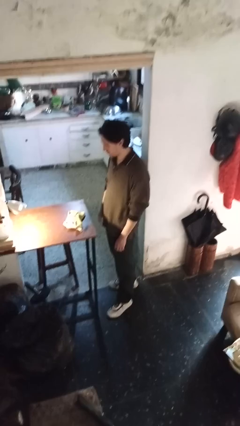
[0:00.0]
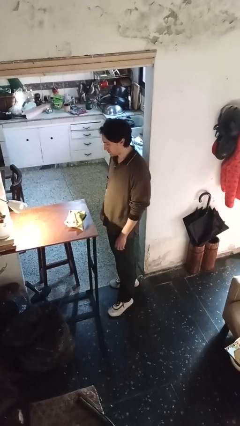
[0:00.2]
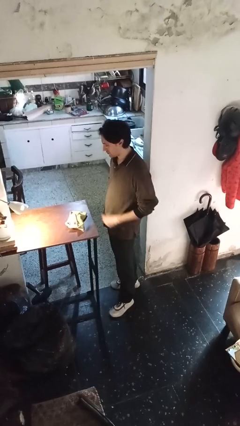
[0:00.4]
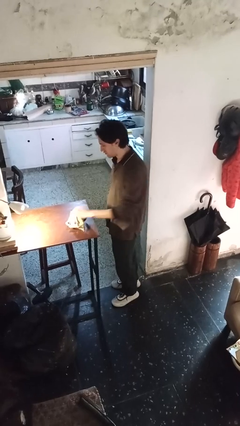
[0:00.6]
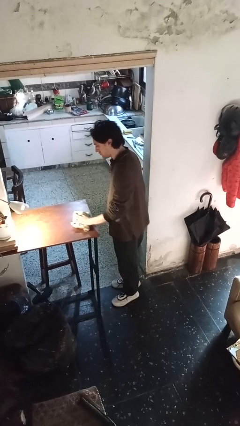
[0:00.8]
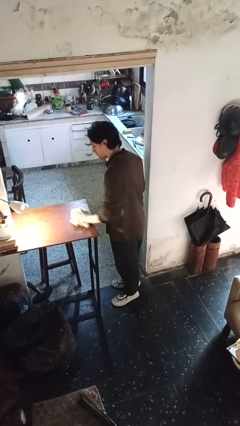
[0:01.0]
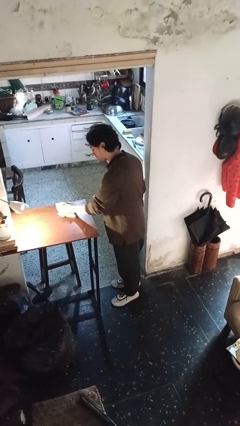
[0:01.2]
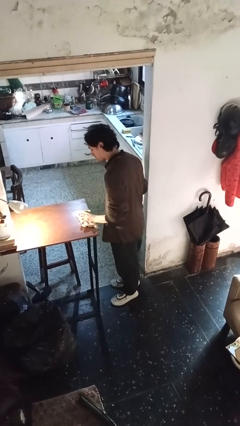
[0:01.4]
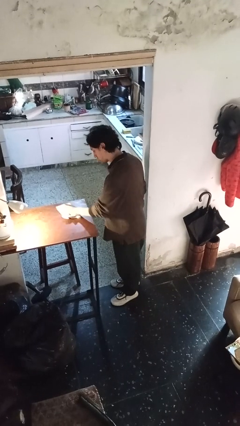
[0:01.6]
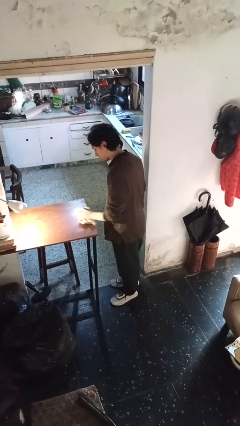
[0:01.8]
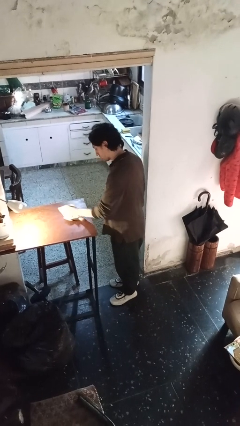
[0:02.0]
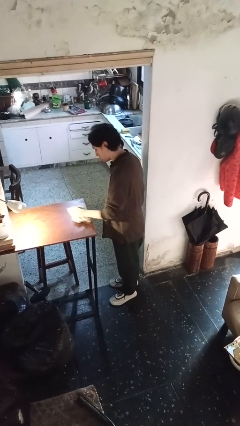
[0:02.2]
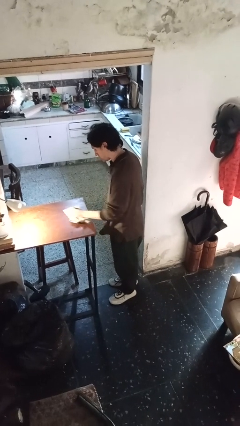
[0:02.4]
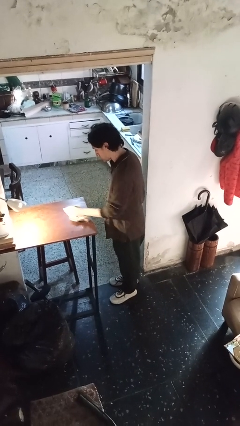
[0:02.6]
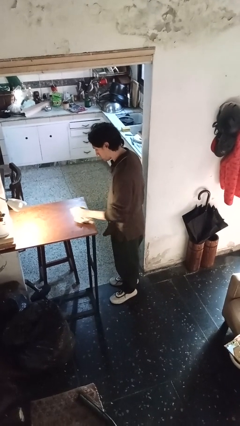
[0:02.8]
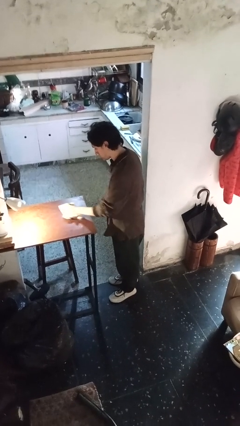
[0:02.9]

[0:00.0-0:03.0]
person cleans table with rag

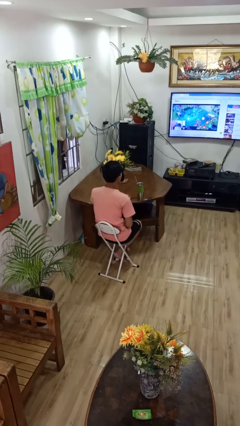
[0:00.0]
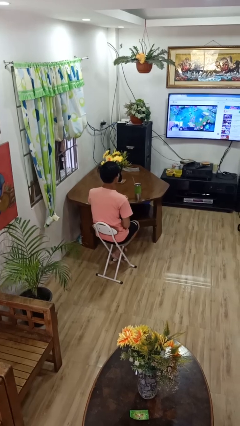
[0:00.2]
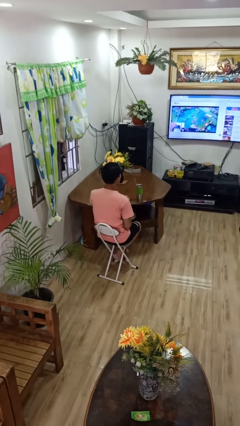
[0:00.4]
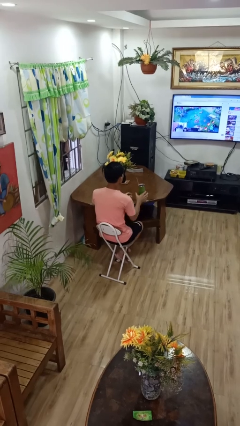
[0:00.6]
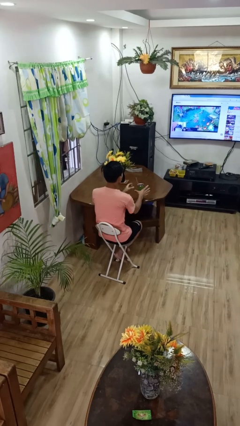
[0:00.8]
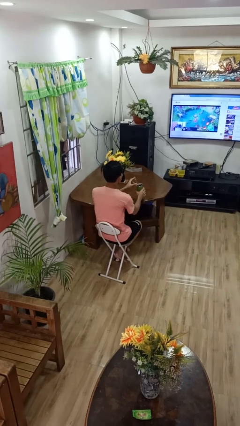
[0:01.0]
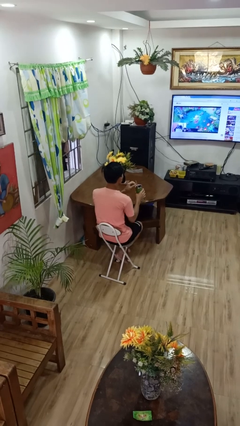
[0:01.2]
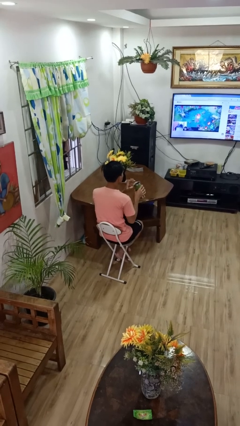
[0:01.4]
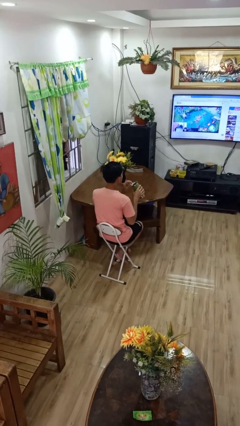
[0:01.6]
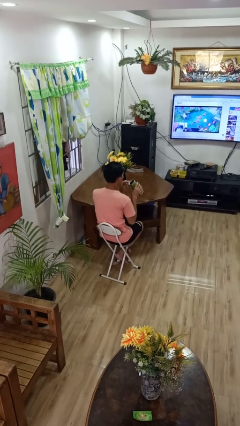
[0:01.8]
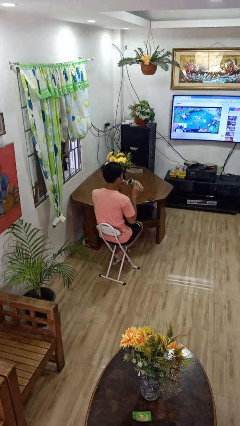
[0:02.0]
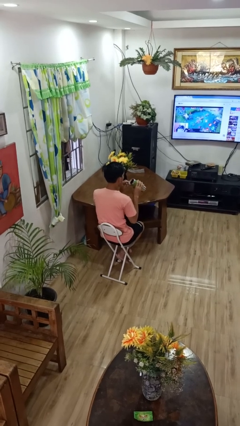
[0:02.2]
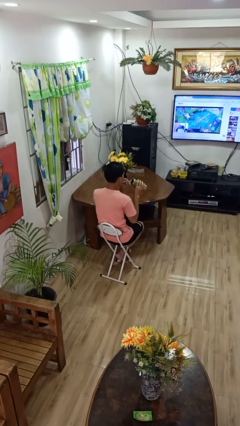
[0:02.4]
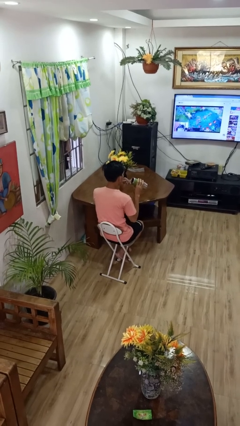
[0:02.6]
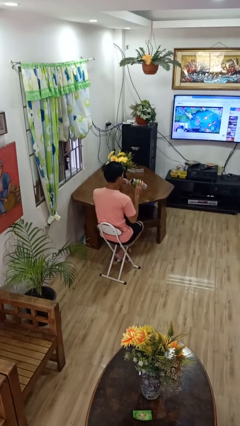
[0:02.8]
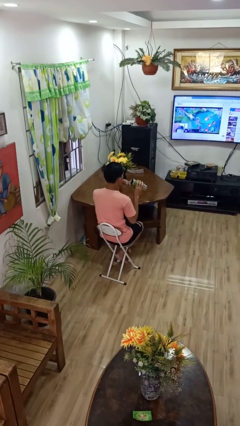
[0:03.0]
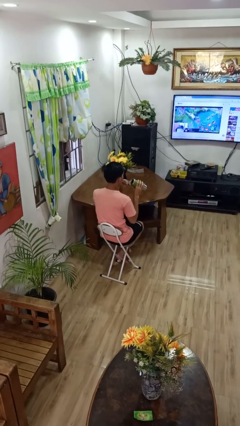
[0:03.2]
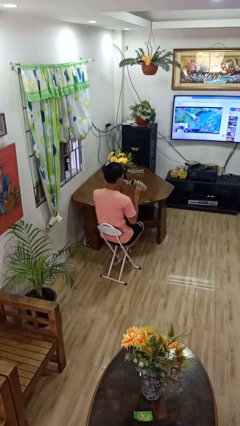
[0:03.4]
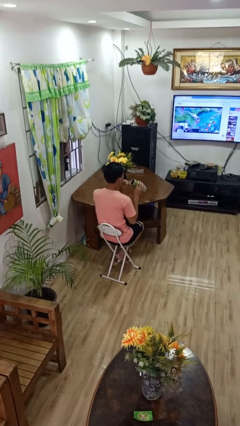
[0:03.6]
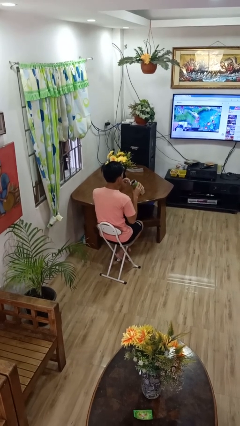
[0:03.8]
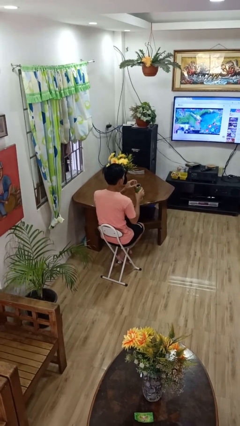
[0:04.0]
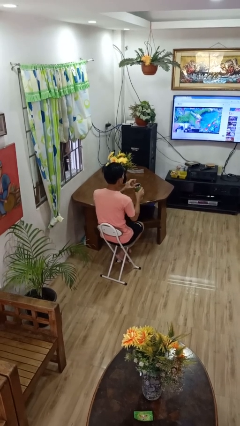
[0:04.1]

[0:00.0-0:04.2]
person drinks from straw

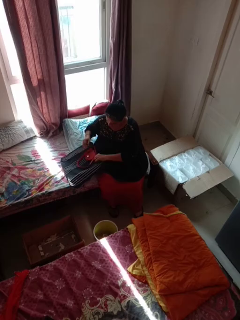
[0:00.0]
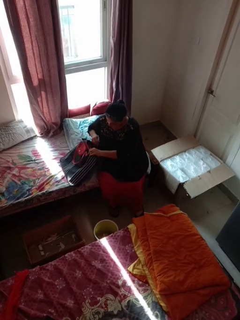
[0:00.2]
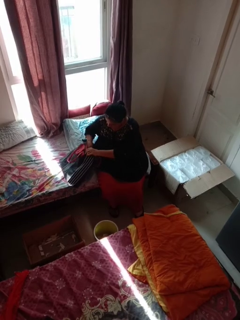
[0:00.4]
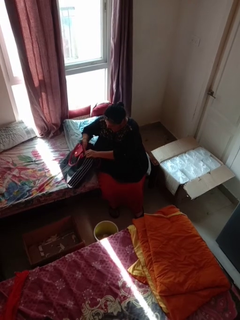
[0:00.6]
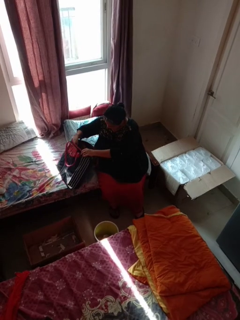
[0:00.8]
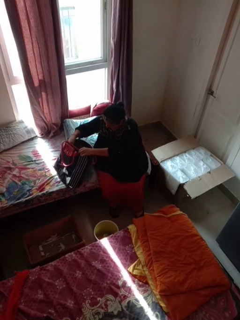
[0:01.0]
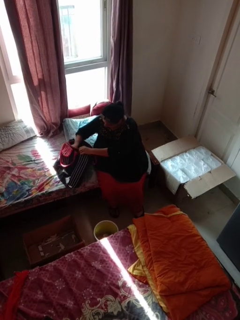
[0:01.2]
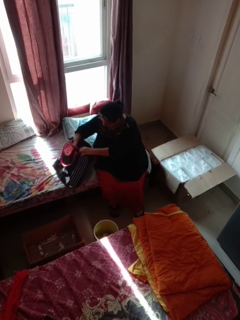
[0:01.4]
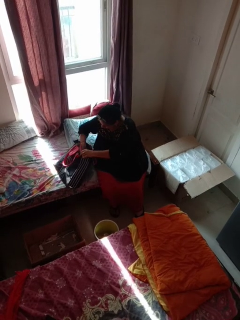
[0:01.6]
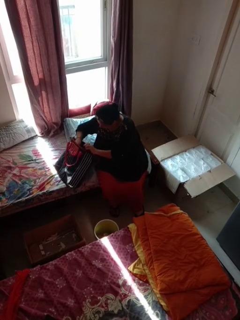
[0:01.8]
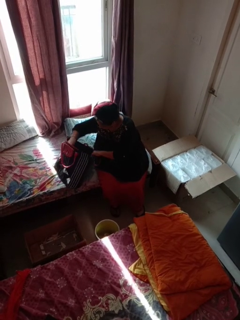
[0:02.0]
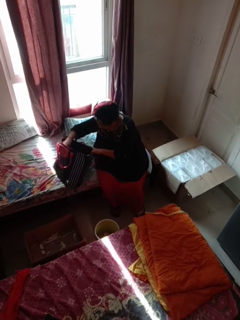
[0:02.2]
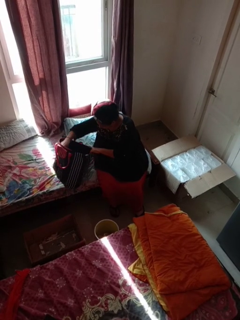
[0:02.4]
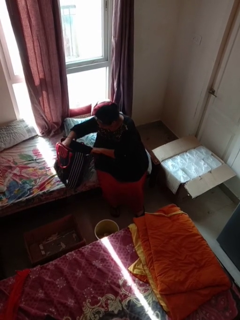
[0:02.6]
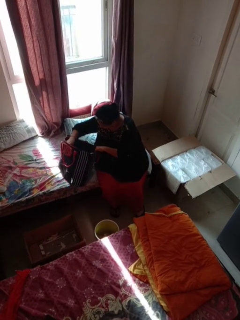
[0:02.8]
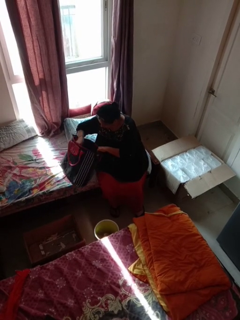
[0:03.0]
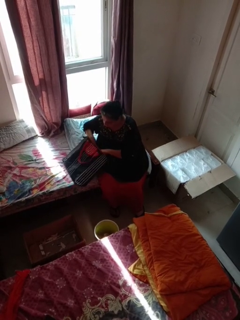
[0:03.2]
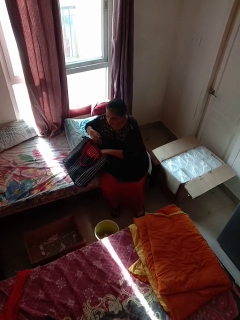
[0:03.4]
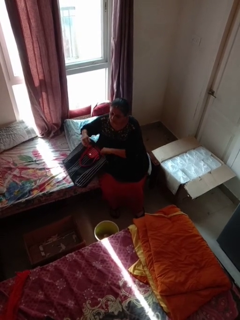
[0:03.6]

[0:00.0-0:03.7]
person searches in bag

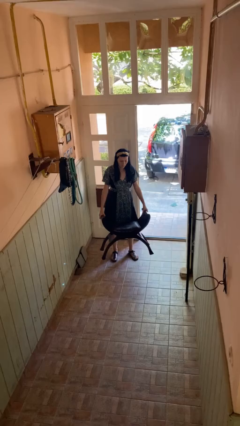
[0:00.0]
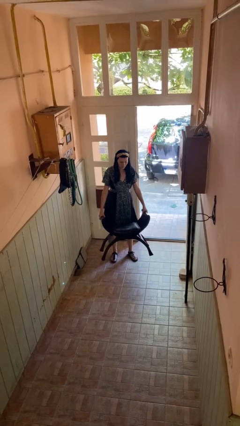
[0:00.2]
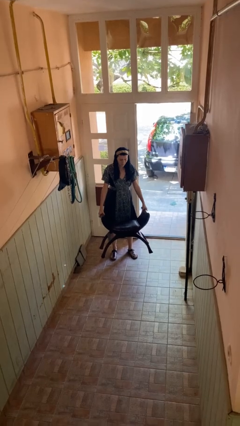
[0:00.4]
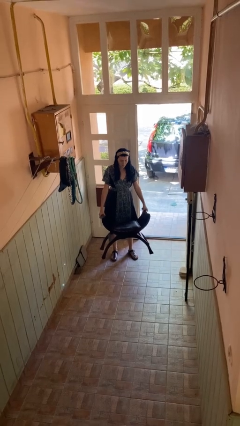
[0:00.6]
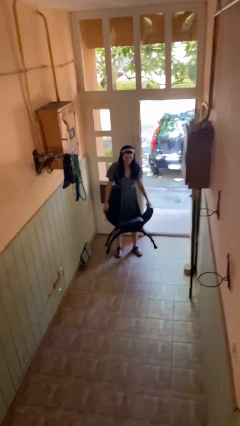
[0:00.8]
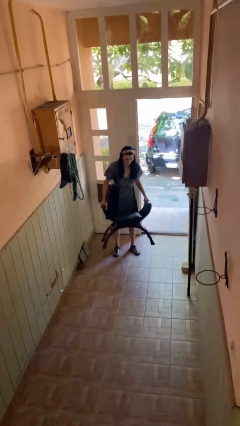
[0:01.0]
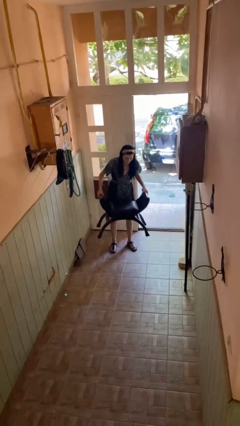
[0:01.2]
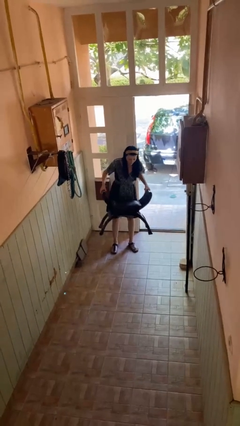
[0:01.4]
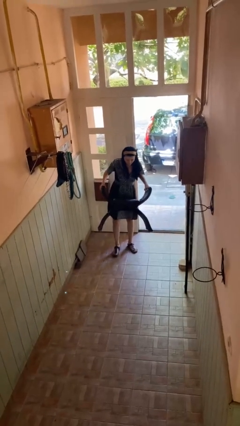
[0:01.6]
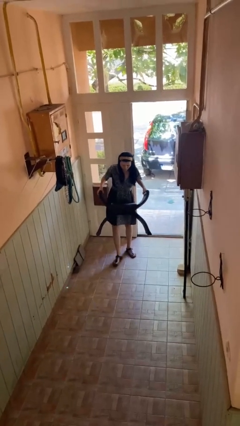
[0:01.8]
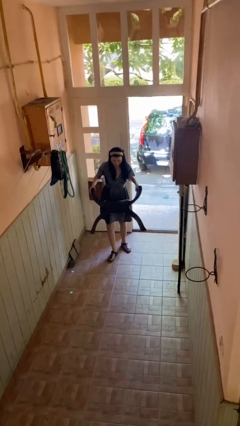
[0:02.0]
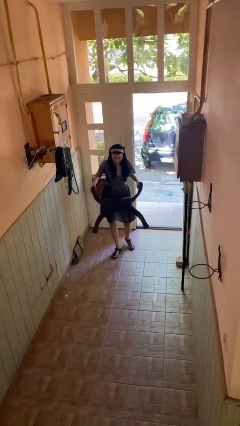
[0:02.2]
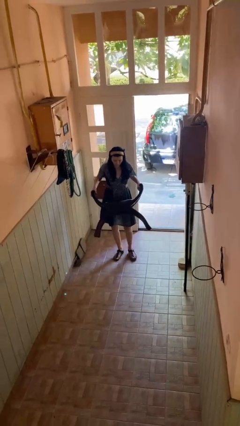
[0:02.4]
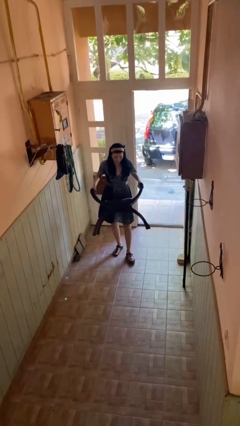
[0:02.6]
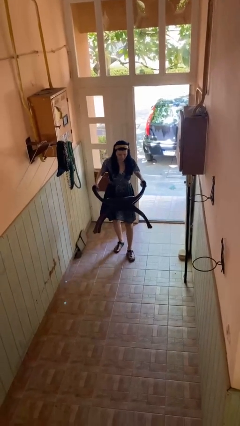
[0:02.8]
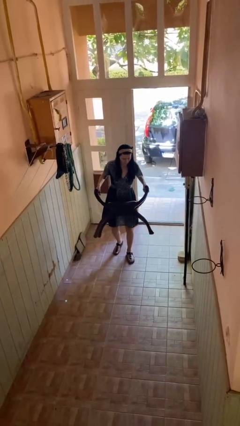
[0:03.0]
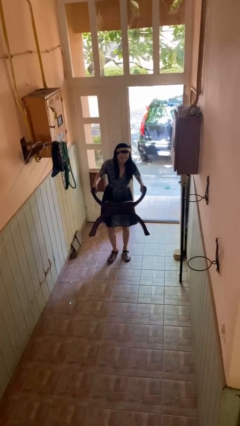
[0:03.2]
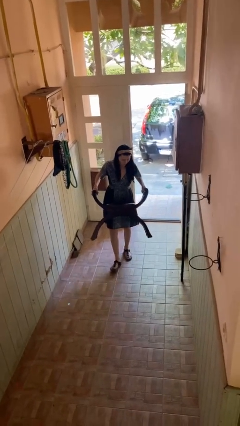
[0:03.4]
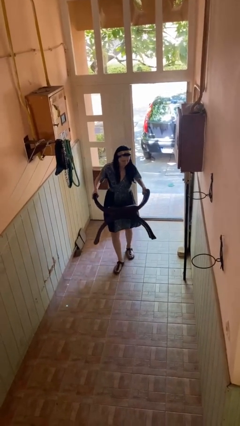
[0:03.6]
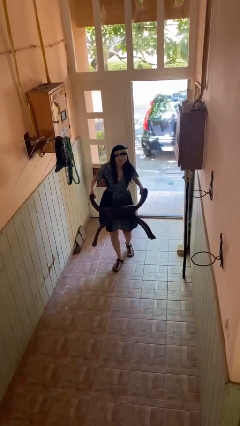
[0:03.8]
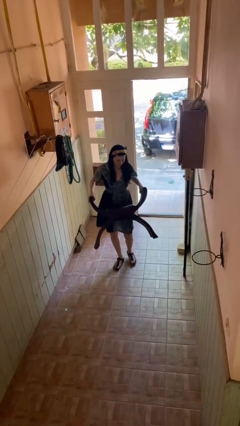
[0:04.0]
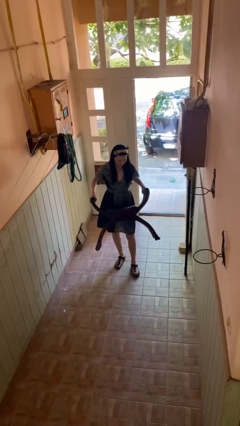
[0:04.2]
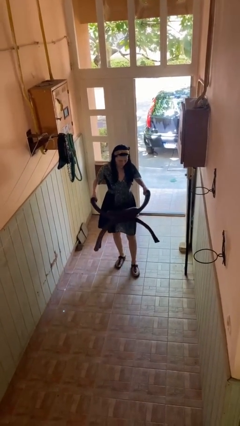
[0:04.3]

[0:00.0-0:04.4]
person carries furniture

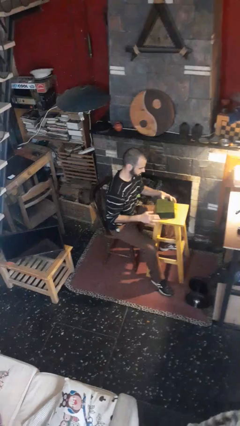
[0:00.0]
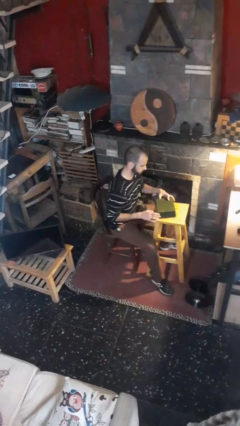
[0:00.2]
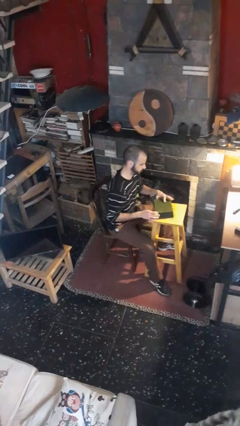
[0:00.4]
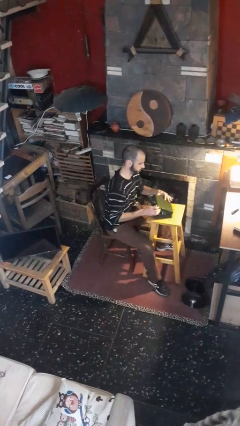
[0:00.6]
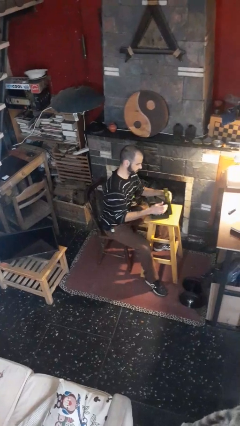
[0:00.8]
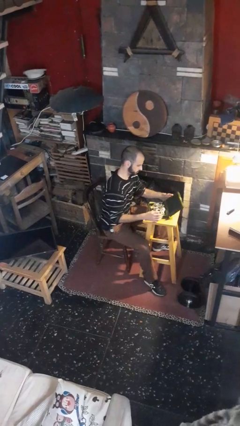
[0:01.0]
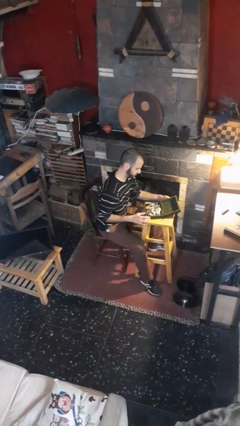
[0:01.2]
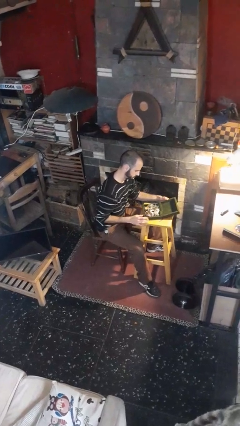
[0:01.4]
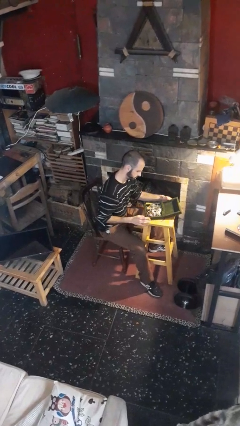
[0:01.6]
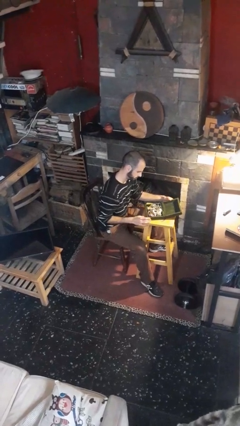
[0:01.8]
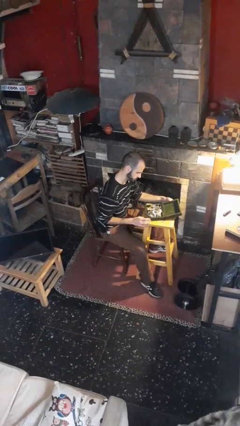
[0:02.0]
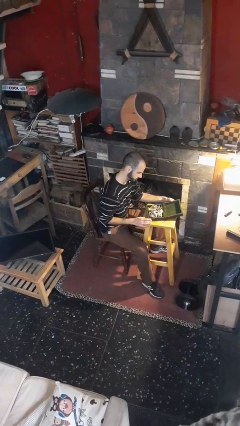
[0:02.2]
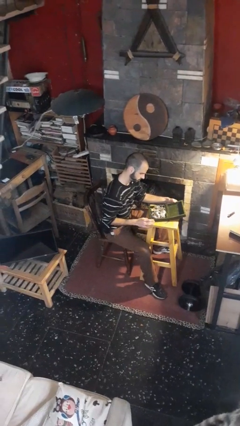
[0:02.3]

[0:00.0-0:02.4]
person opens jewelry box

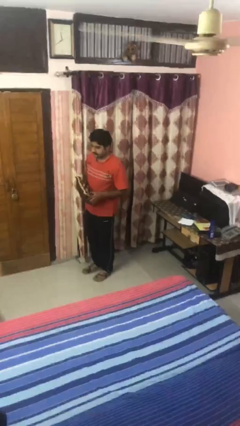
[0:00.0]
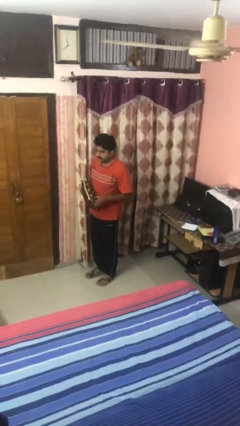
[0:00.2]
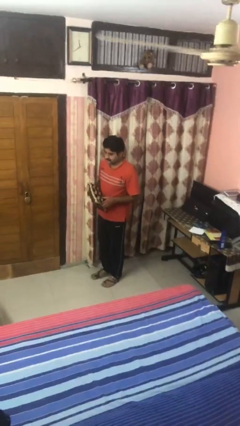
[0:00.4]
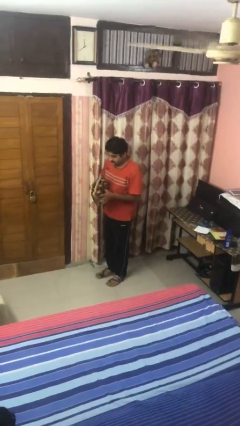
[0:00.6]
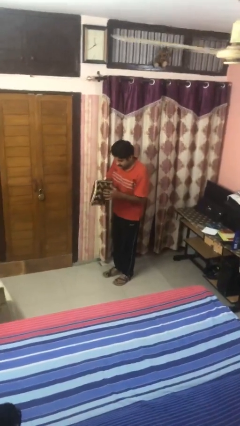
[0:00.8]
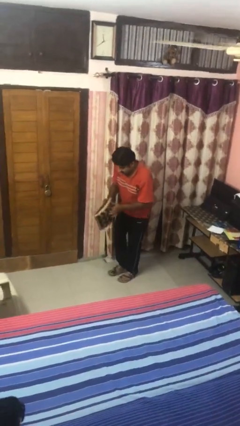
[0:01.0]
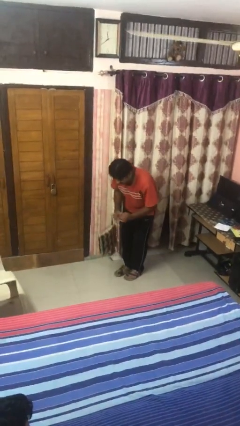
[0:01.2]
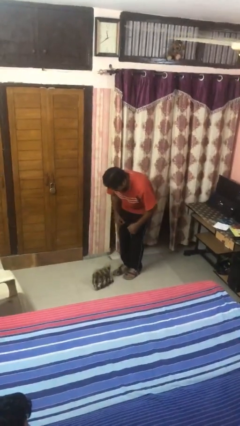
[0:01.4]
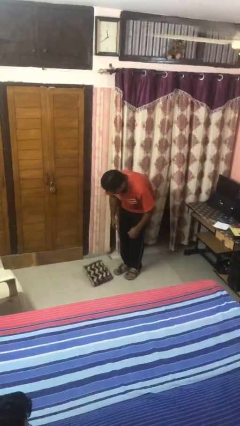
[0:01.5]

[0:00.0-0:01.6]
person drops object
